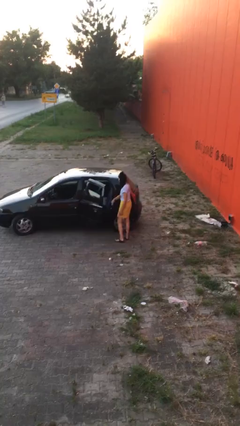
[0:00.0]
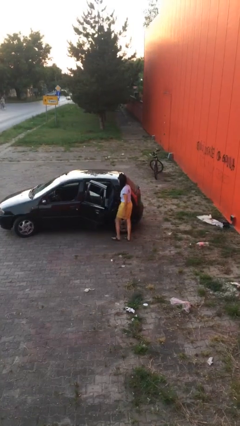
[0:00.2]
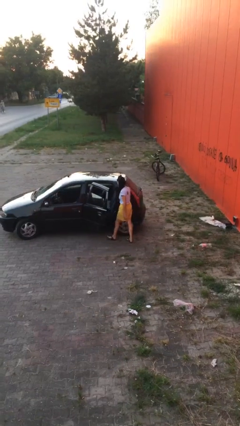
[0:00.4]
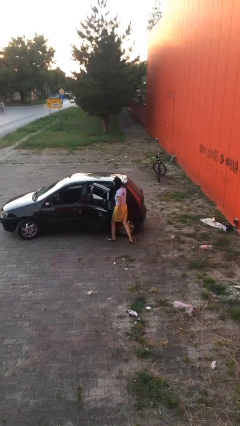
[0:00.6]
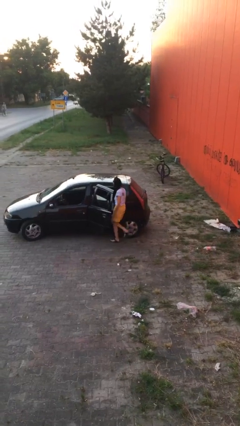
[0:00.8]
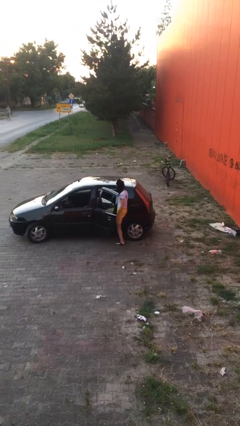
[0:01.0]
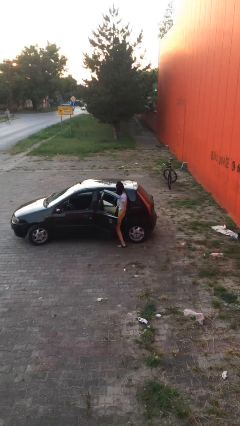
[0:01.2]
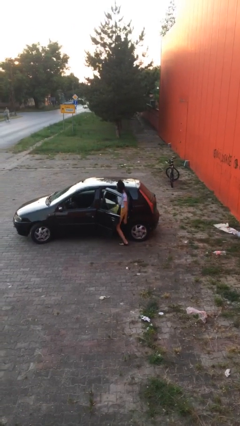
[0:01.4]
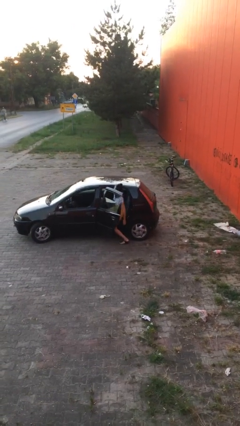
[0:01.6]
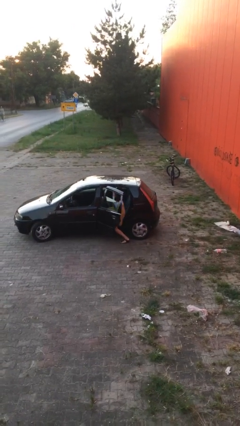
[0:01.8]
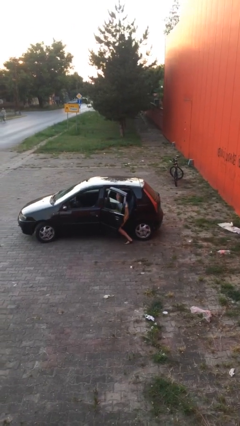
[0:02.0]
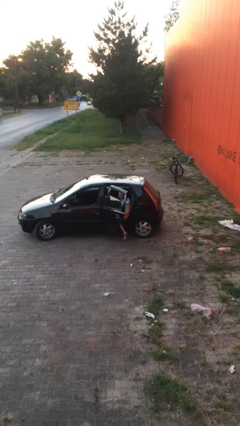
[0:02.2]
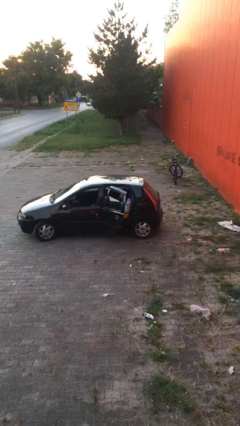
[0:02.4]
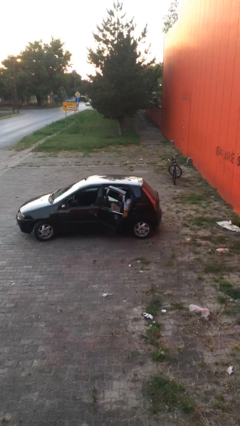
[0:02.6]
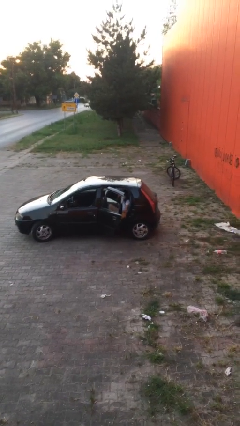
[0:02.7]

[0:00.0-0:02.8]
person enters car

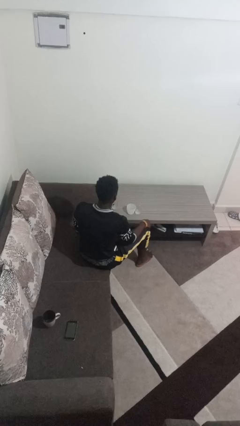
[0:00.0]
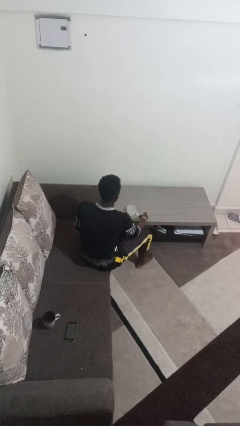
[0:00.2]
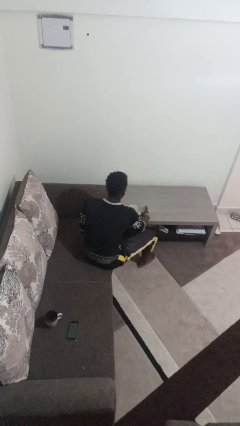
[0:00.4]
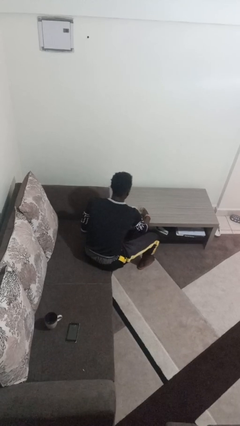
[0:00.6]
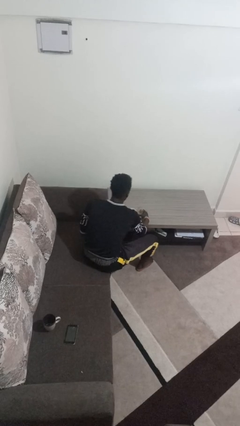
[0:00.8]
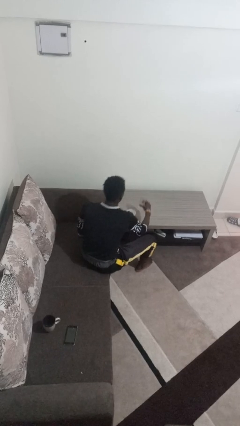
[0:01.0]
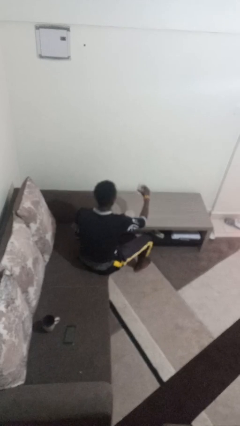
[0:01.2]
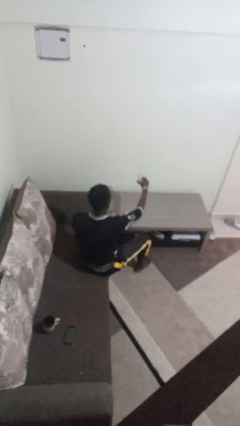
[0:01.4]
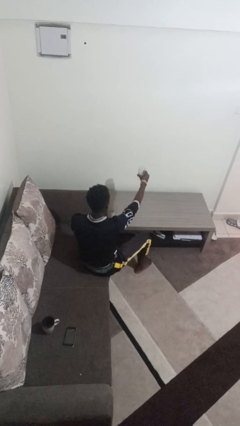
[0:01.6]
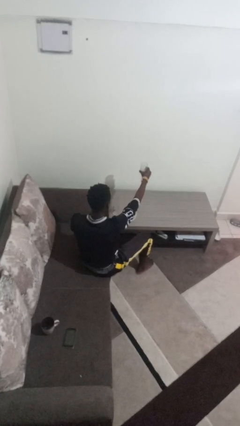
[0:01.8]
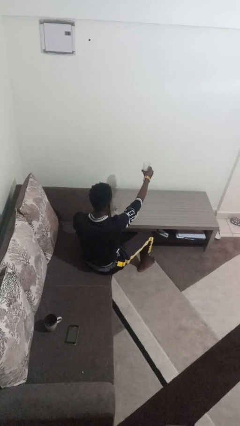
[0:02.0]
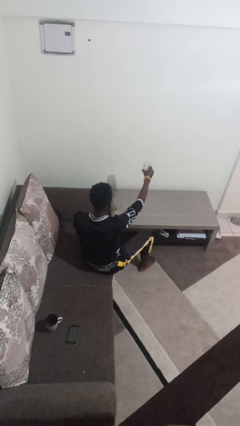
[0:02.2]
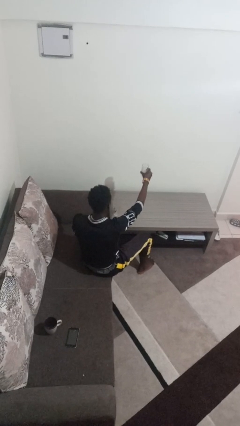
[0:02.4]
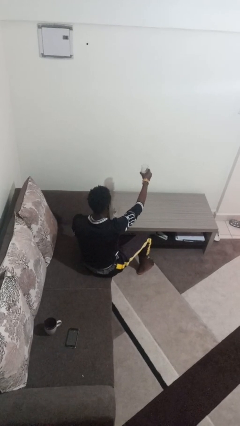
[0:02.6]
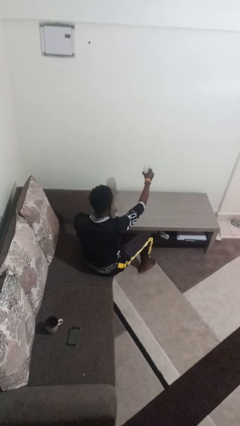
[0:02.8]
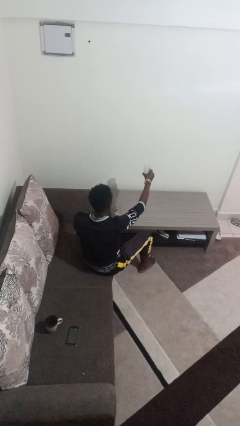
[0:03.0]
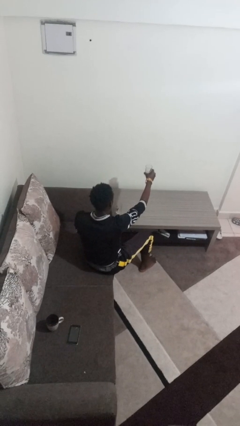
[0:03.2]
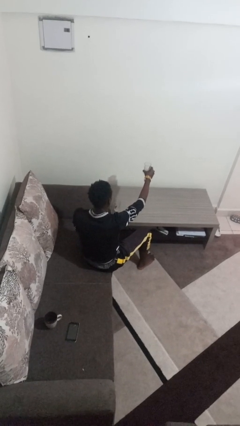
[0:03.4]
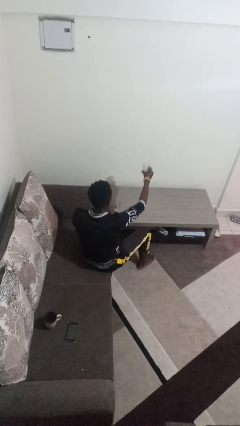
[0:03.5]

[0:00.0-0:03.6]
person picks up object from table

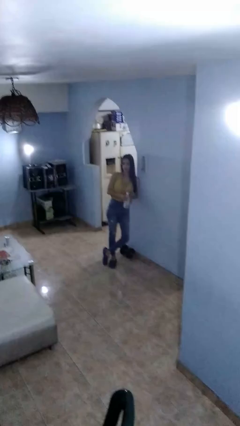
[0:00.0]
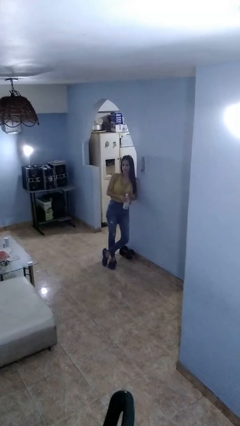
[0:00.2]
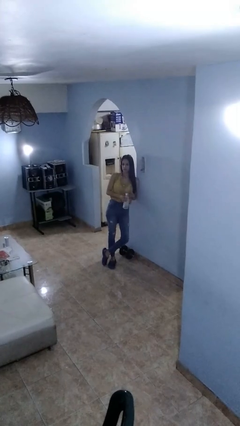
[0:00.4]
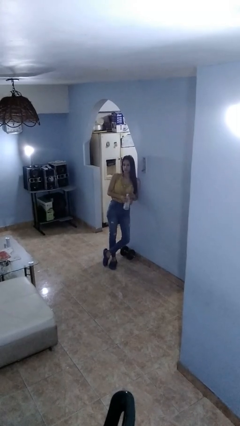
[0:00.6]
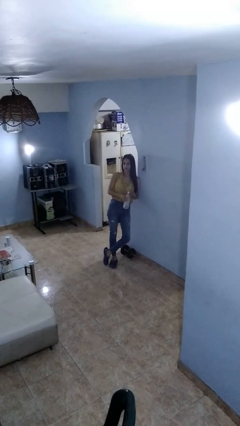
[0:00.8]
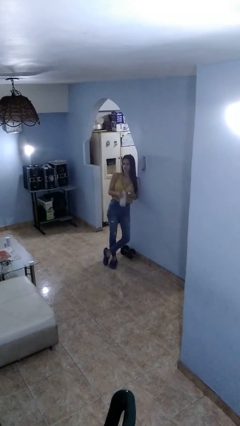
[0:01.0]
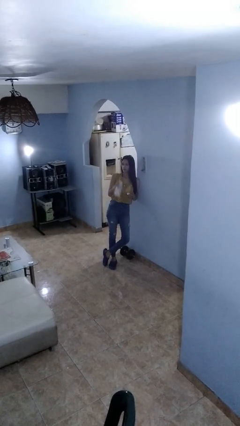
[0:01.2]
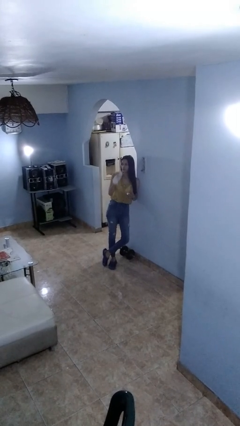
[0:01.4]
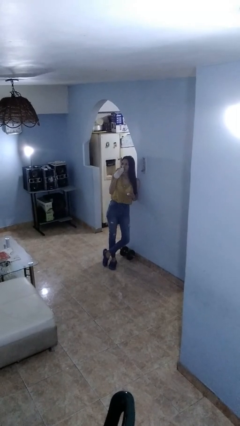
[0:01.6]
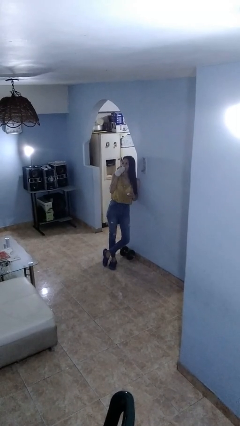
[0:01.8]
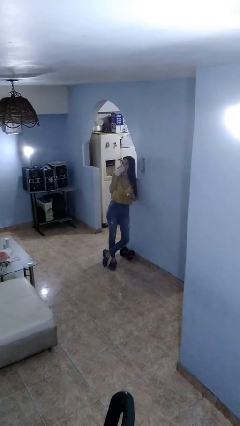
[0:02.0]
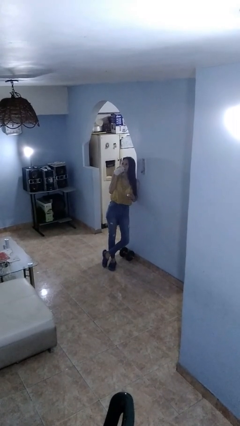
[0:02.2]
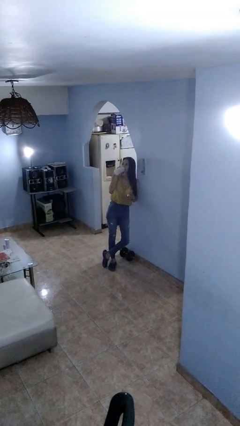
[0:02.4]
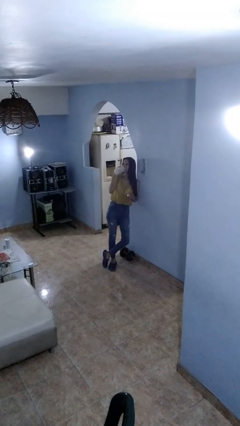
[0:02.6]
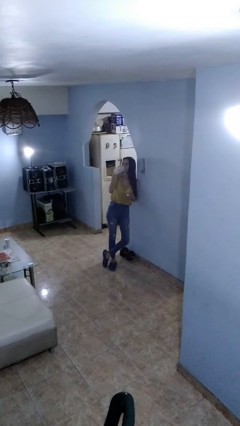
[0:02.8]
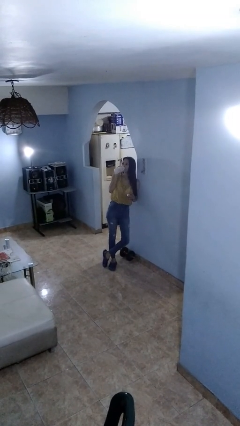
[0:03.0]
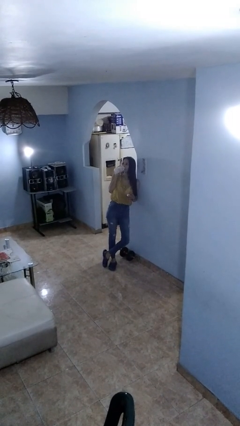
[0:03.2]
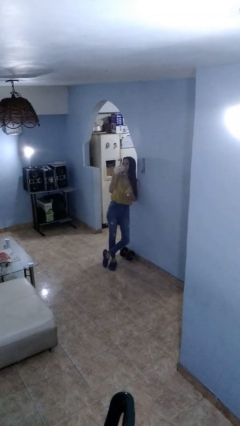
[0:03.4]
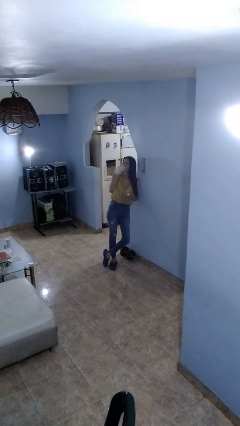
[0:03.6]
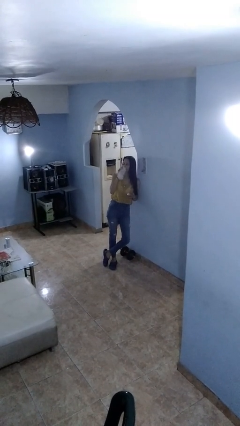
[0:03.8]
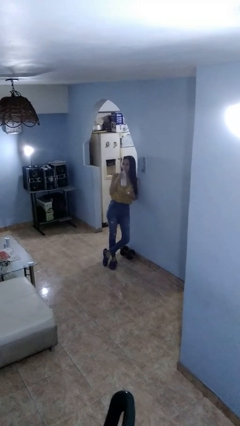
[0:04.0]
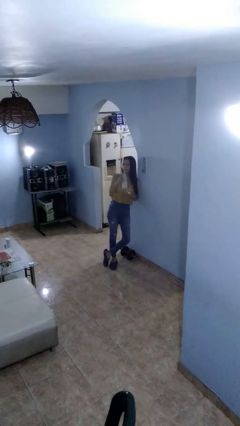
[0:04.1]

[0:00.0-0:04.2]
person drinks from bottle

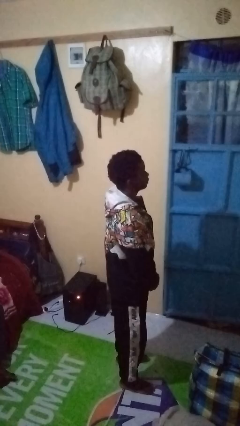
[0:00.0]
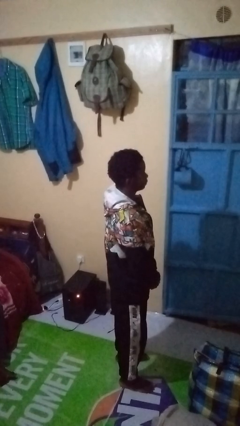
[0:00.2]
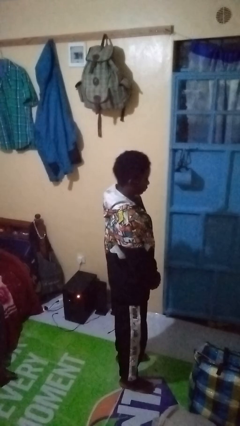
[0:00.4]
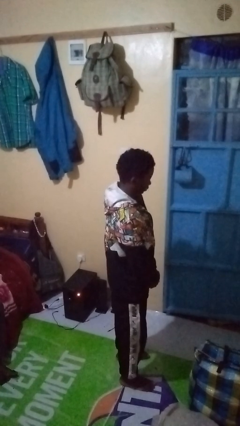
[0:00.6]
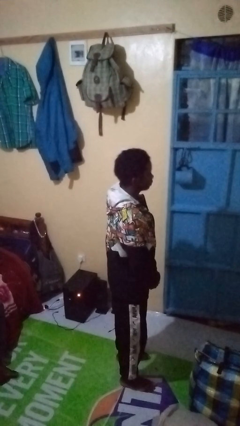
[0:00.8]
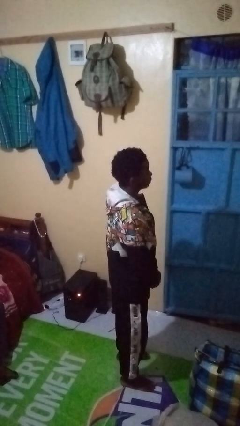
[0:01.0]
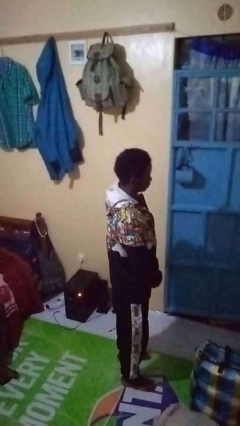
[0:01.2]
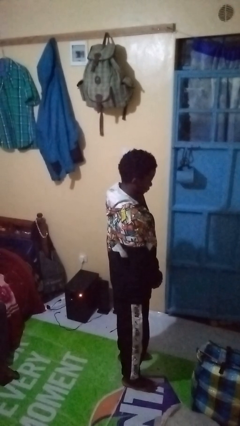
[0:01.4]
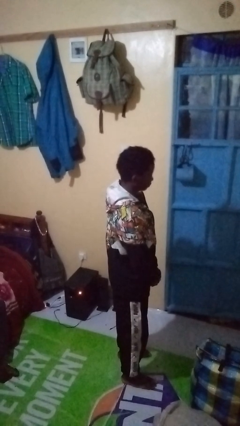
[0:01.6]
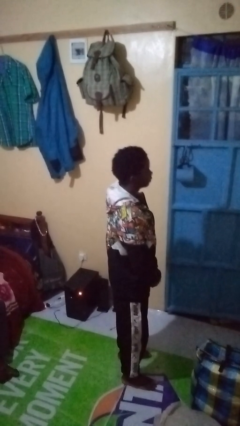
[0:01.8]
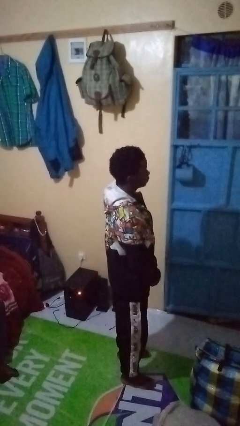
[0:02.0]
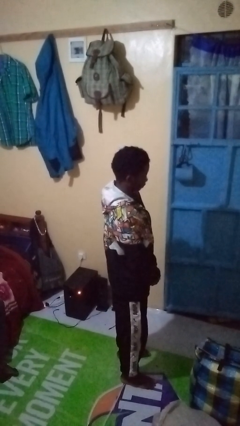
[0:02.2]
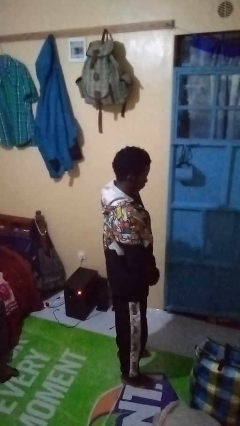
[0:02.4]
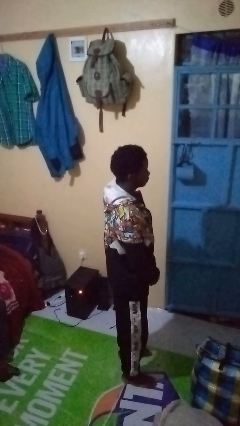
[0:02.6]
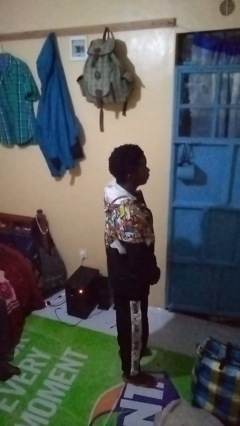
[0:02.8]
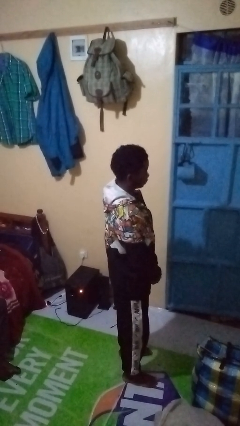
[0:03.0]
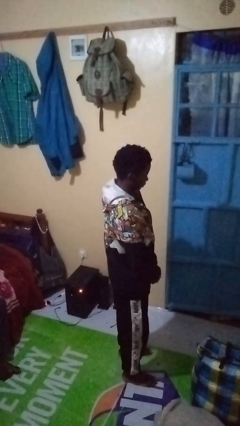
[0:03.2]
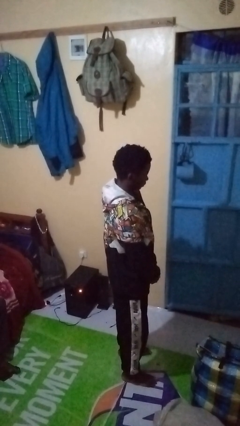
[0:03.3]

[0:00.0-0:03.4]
person nods head

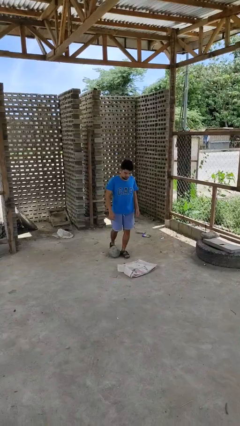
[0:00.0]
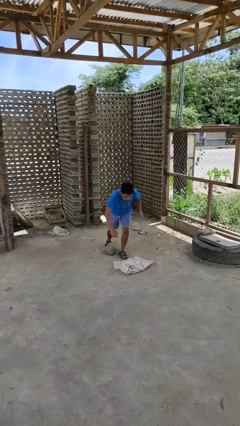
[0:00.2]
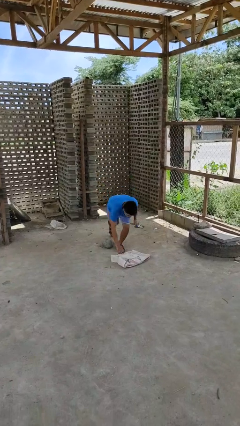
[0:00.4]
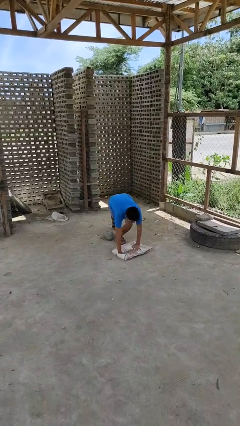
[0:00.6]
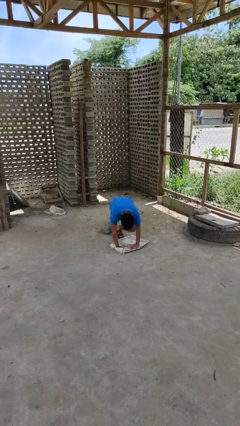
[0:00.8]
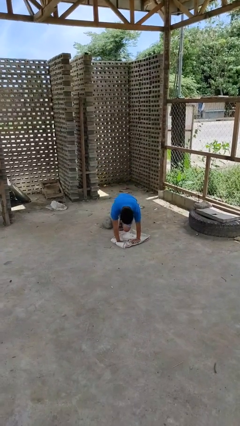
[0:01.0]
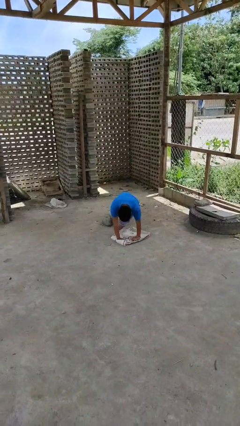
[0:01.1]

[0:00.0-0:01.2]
person trips on object on floor

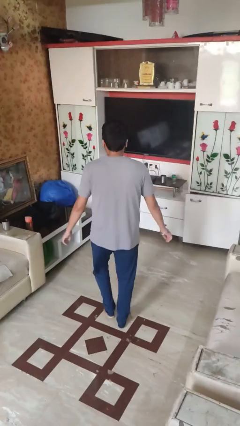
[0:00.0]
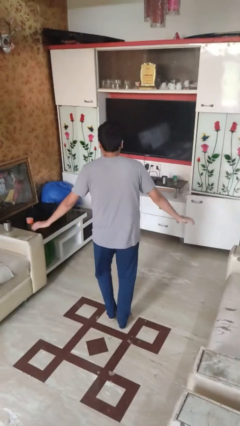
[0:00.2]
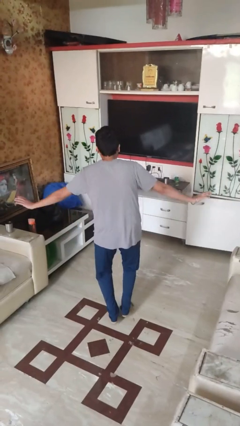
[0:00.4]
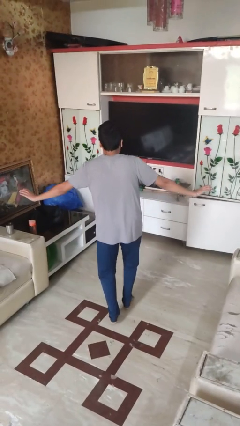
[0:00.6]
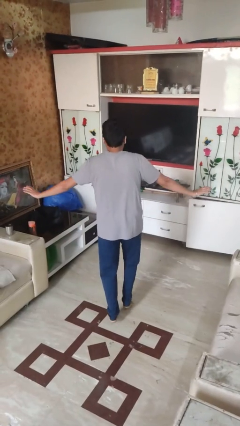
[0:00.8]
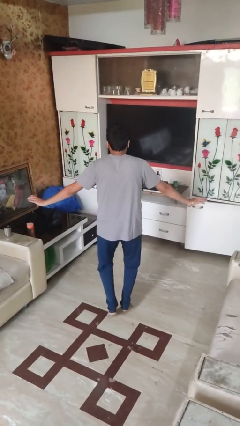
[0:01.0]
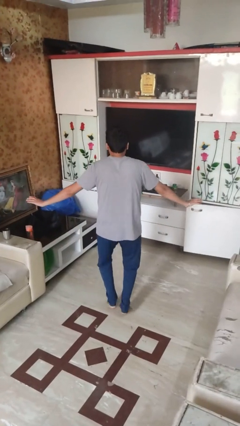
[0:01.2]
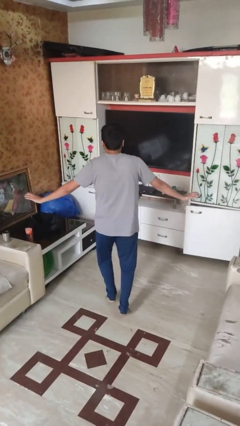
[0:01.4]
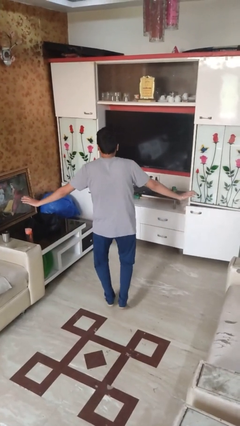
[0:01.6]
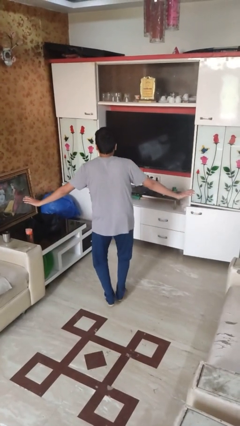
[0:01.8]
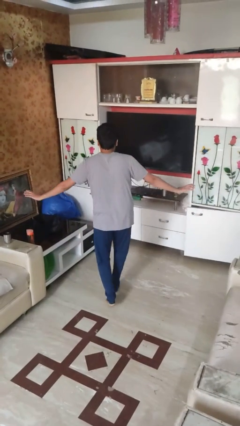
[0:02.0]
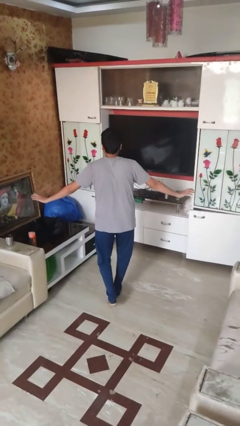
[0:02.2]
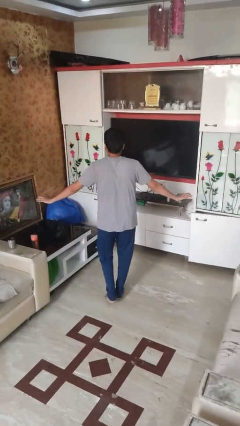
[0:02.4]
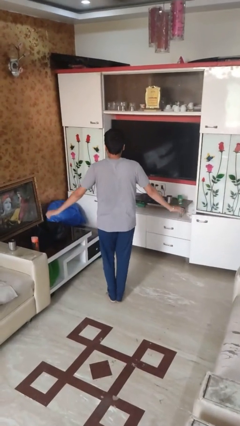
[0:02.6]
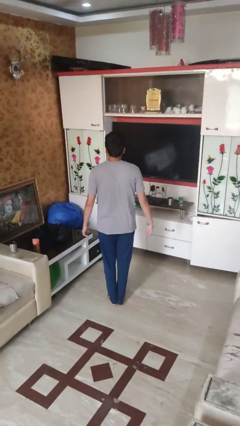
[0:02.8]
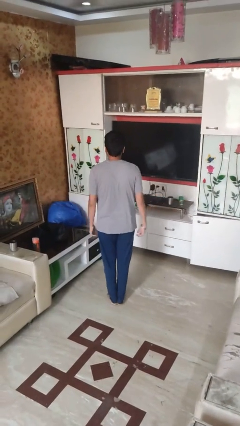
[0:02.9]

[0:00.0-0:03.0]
person walks tiptoe
